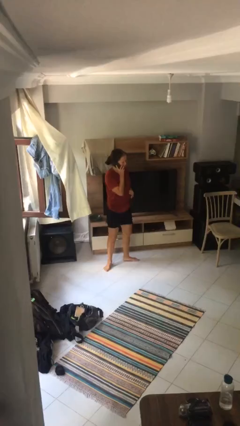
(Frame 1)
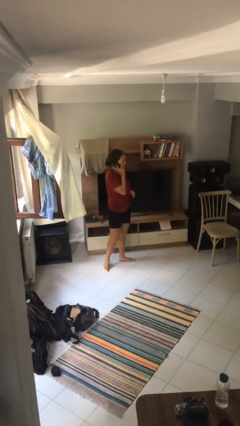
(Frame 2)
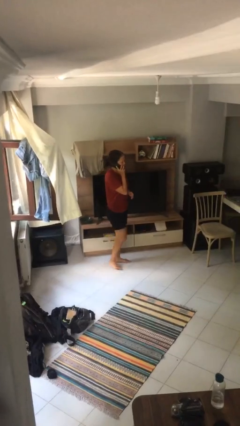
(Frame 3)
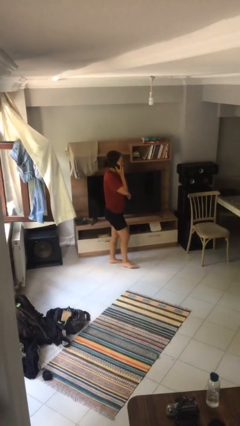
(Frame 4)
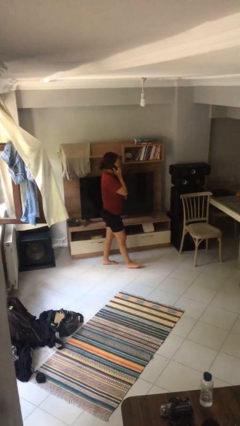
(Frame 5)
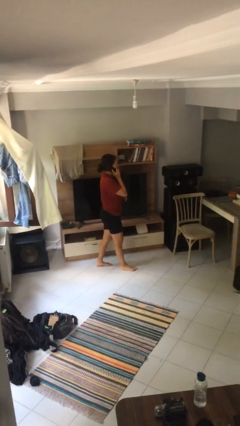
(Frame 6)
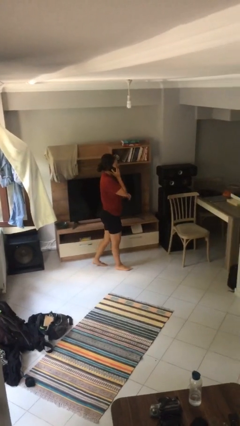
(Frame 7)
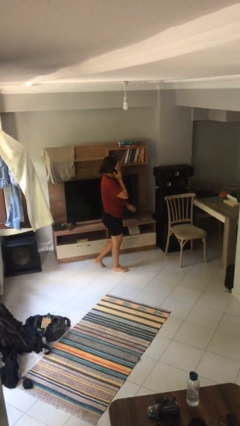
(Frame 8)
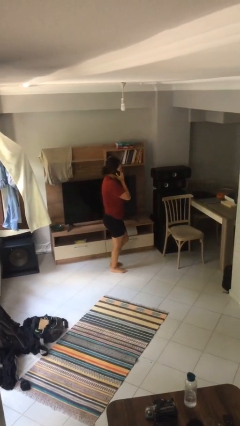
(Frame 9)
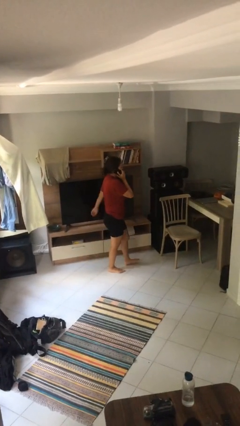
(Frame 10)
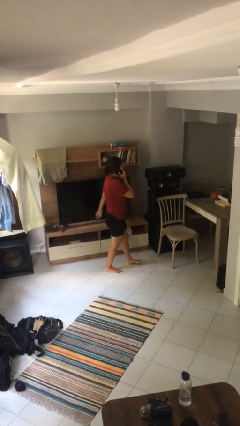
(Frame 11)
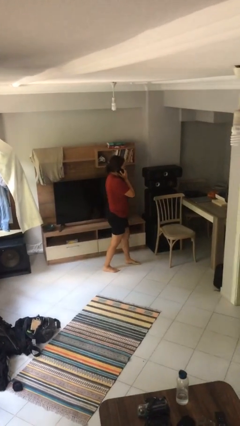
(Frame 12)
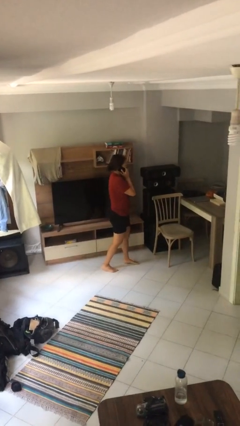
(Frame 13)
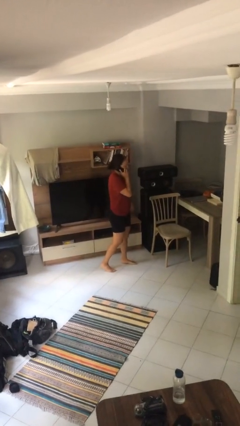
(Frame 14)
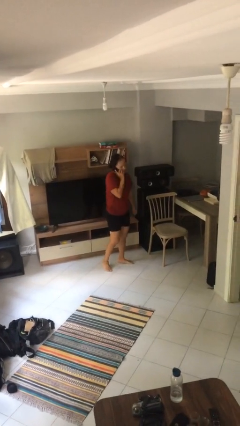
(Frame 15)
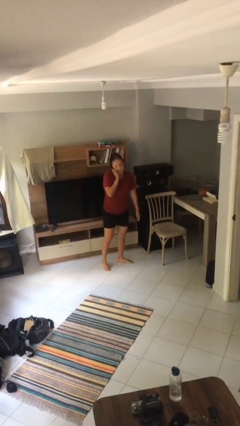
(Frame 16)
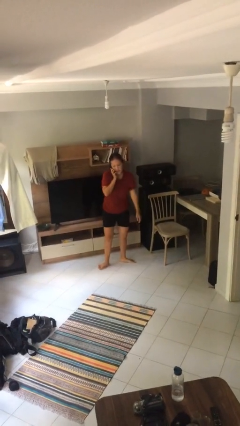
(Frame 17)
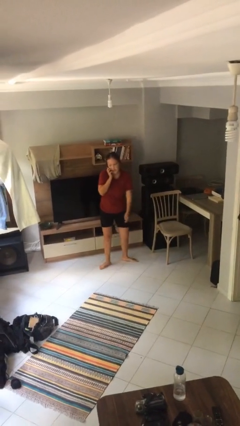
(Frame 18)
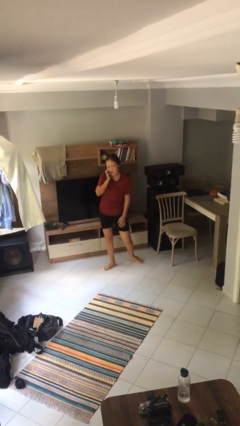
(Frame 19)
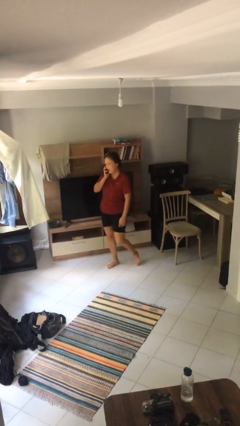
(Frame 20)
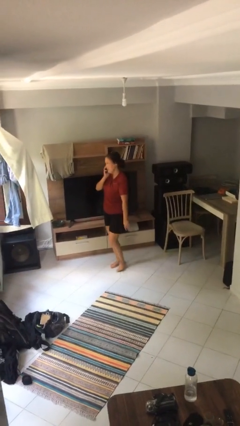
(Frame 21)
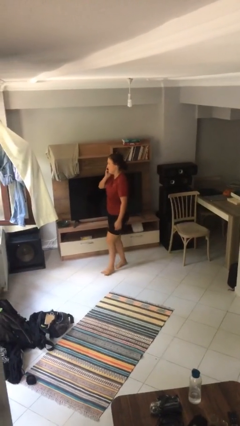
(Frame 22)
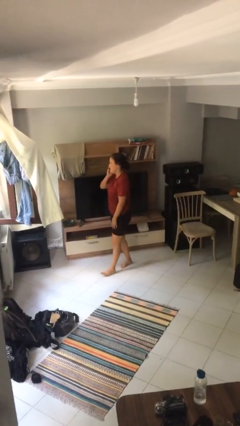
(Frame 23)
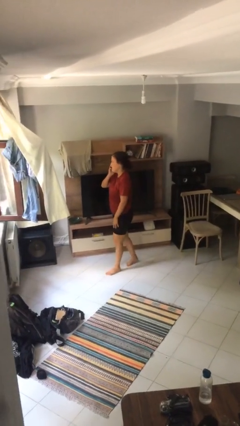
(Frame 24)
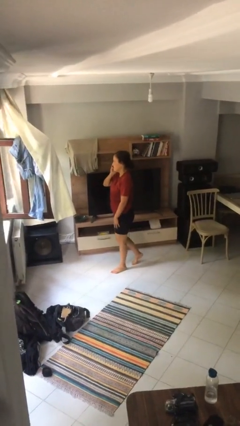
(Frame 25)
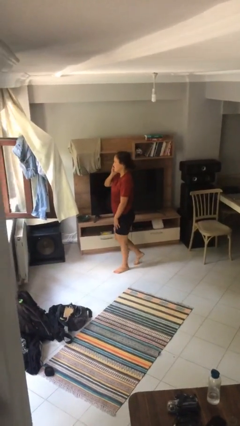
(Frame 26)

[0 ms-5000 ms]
person talks on phone

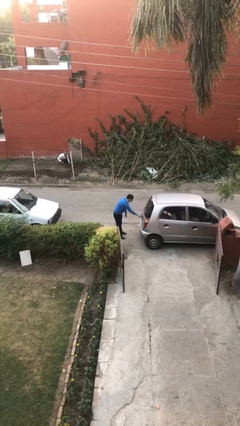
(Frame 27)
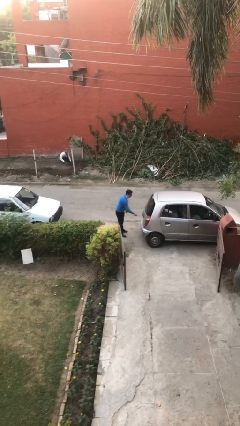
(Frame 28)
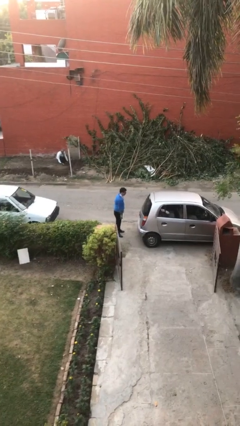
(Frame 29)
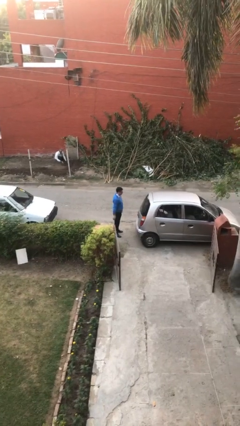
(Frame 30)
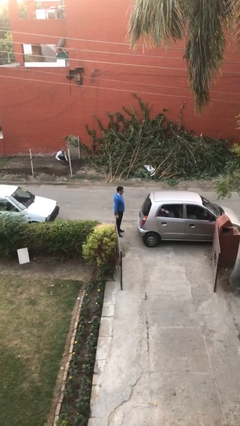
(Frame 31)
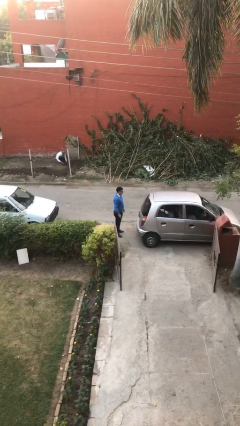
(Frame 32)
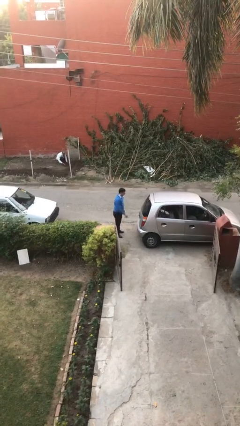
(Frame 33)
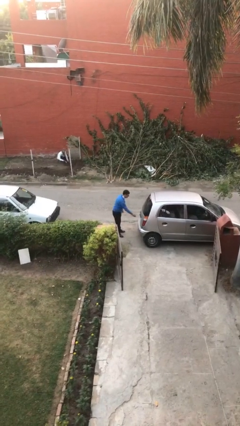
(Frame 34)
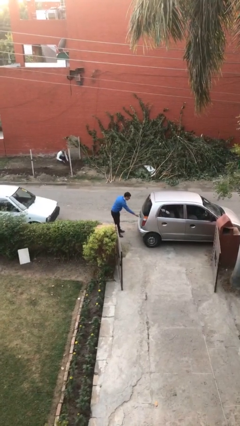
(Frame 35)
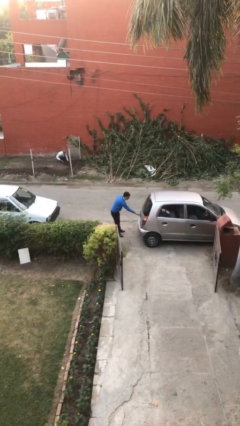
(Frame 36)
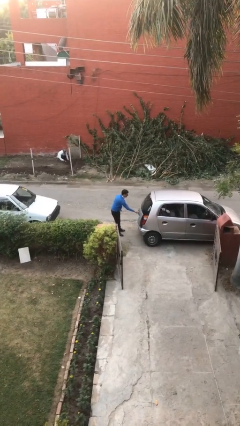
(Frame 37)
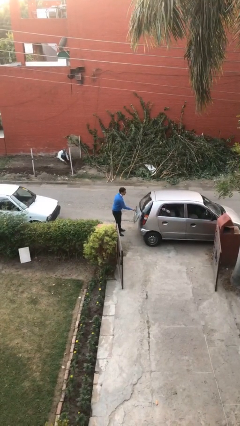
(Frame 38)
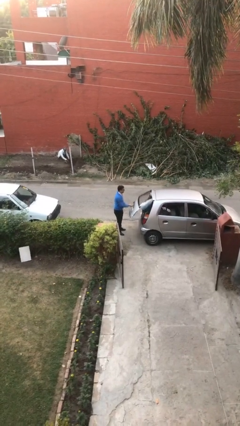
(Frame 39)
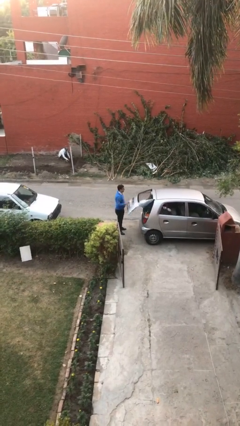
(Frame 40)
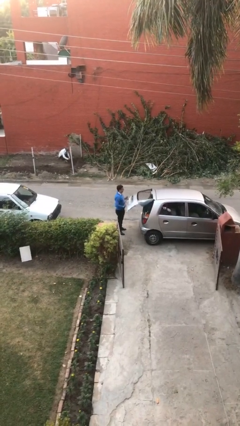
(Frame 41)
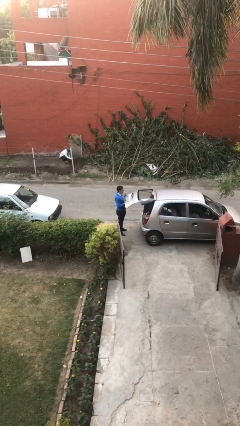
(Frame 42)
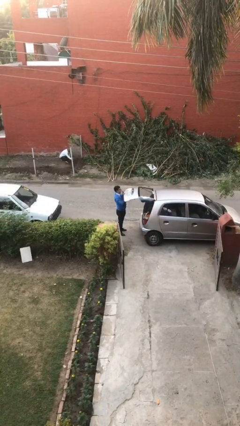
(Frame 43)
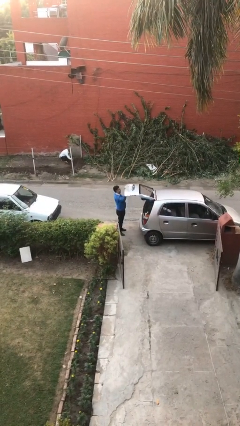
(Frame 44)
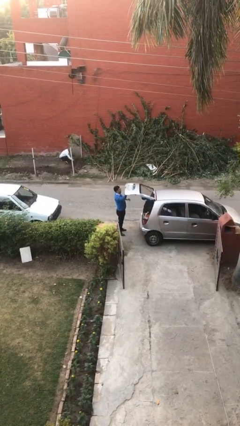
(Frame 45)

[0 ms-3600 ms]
person opens car trunk

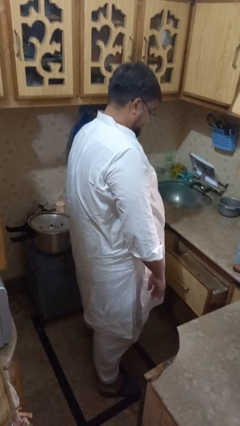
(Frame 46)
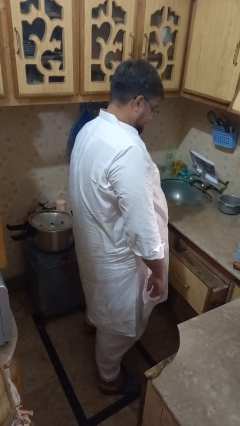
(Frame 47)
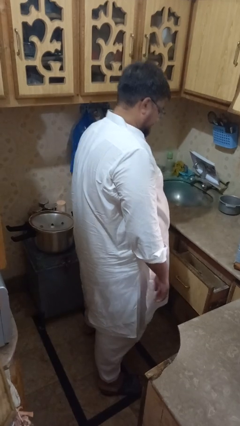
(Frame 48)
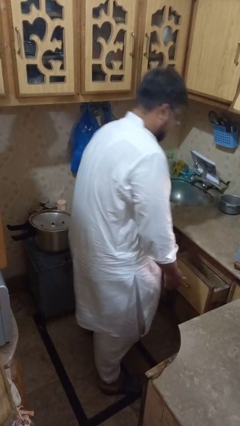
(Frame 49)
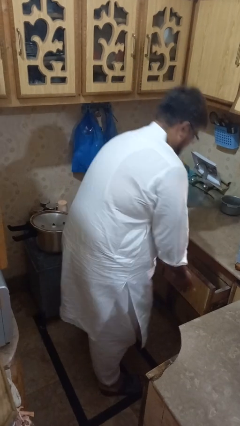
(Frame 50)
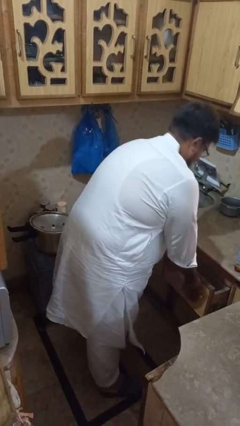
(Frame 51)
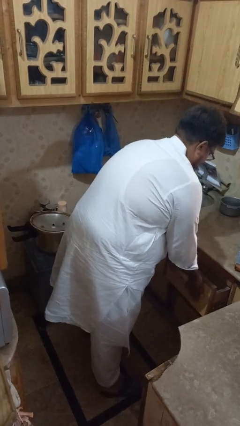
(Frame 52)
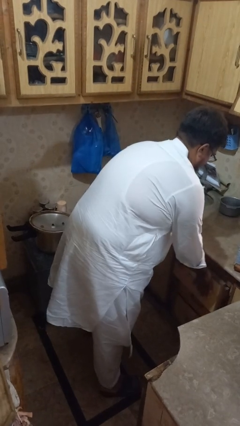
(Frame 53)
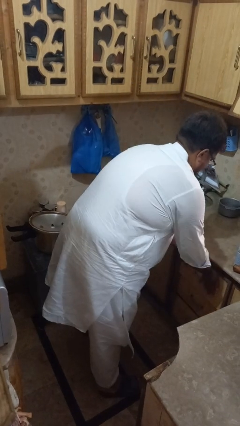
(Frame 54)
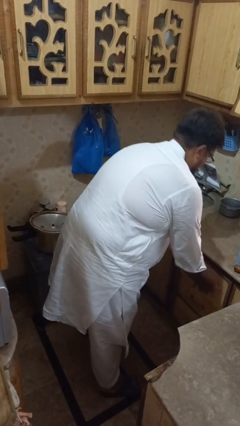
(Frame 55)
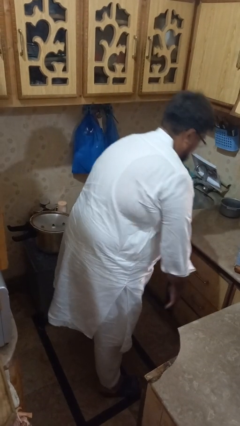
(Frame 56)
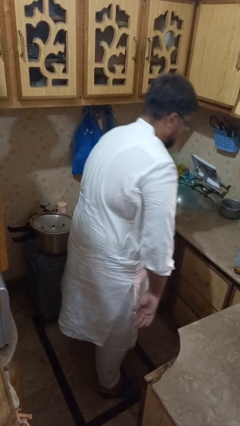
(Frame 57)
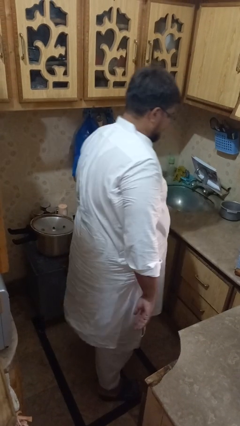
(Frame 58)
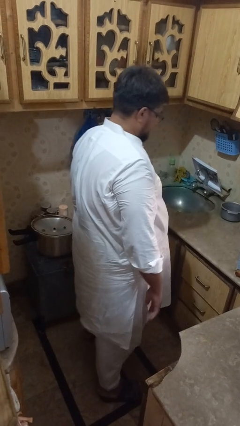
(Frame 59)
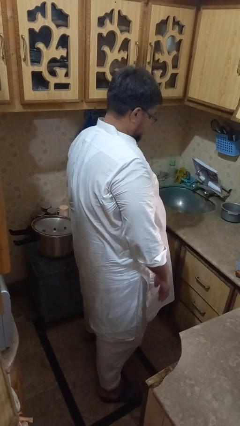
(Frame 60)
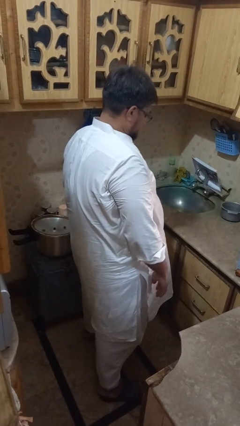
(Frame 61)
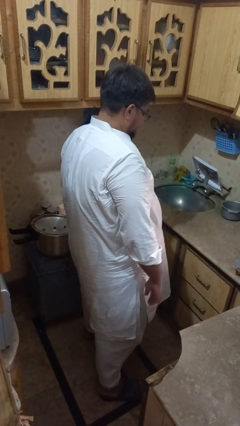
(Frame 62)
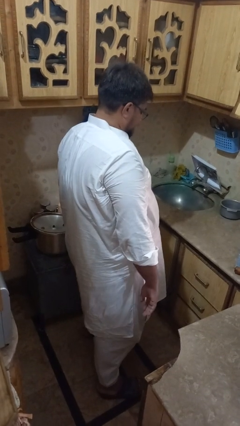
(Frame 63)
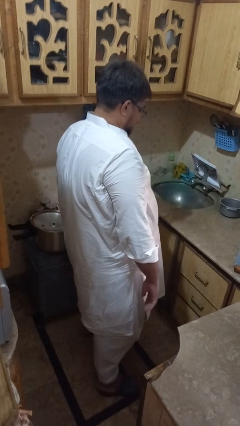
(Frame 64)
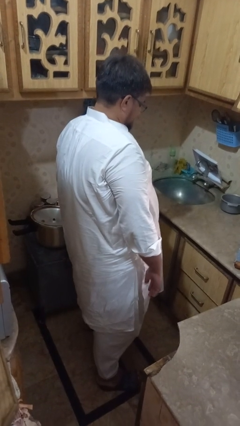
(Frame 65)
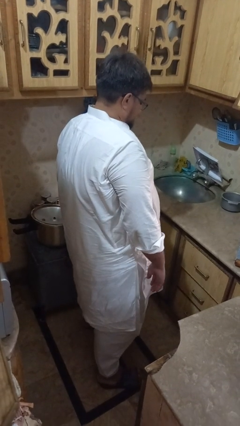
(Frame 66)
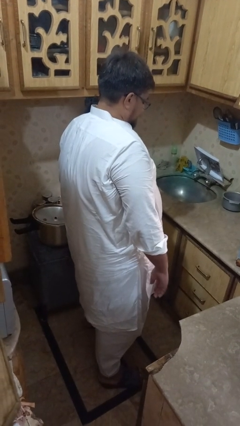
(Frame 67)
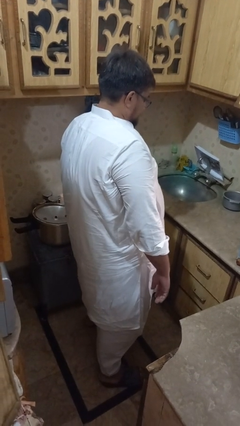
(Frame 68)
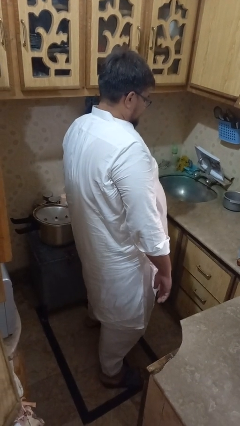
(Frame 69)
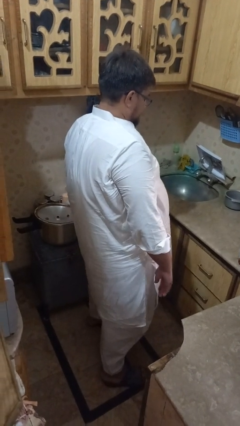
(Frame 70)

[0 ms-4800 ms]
person closes kitchen drawer

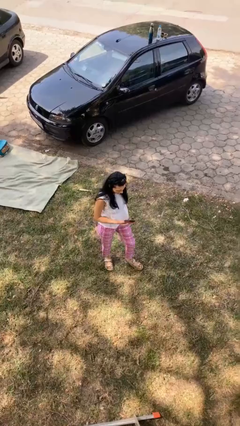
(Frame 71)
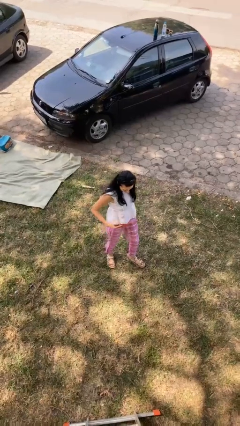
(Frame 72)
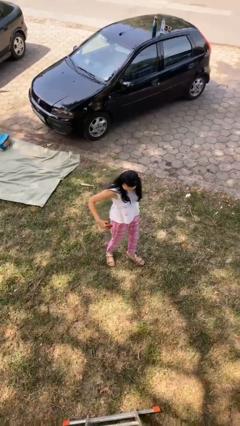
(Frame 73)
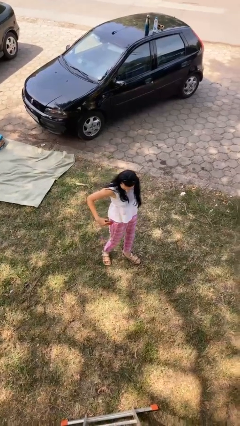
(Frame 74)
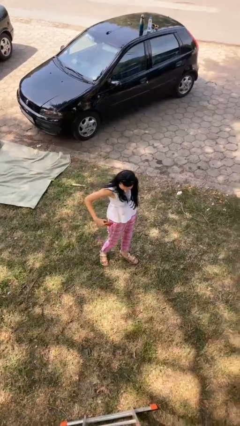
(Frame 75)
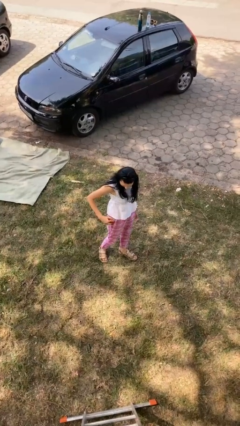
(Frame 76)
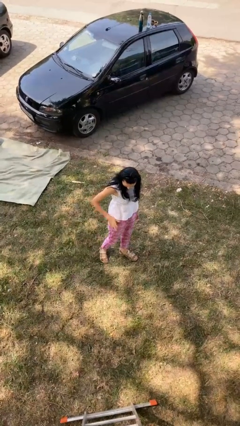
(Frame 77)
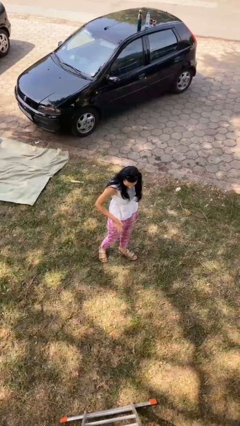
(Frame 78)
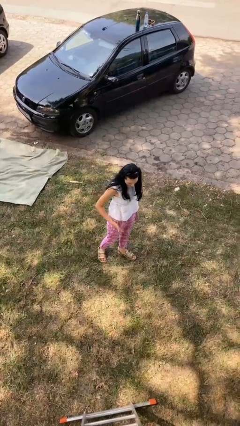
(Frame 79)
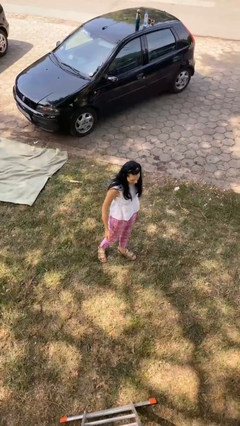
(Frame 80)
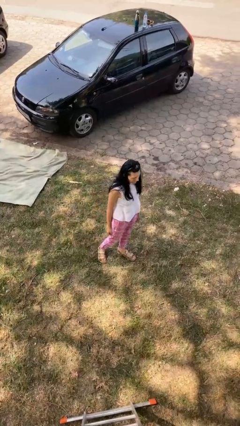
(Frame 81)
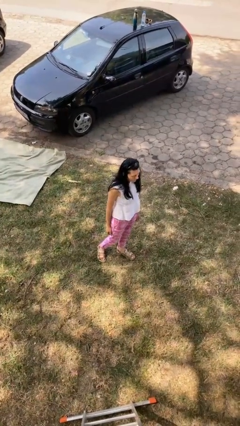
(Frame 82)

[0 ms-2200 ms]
person puts phone into pocket

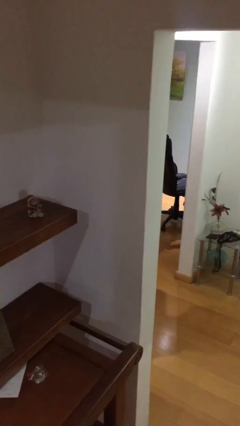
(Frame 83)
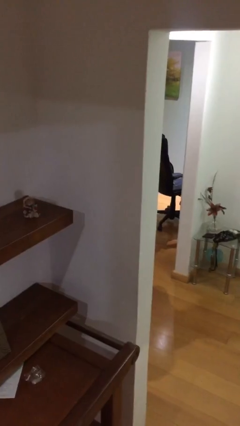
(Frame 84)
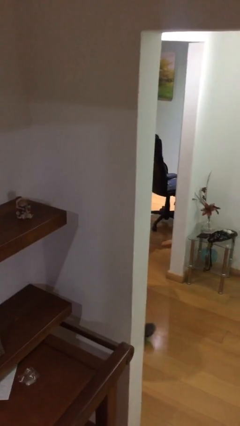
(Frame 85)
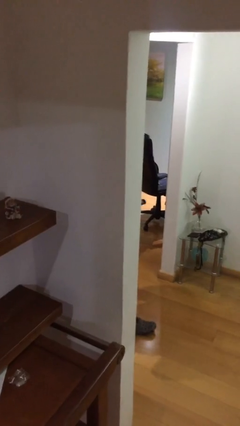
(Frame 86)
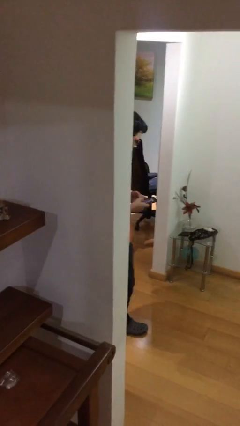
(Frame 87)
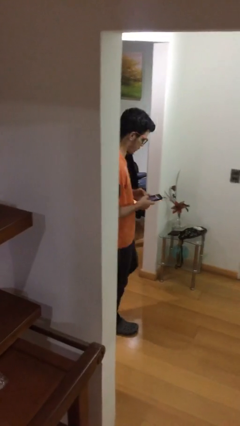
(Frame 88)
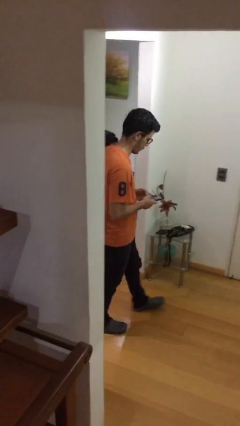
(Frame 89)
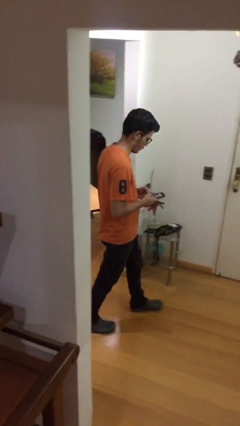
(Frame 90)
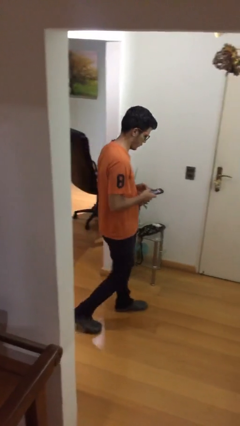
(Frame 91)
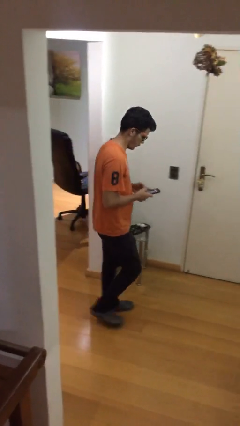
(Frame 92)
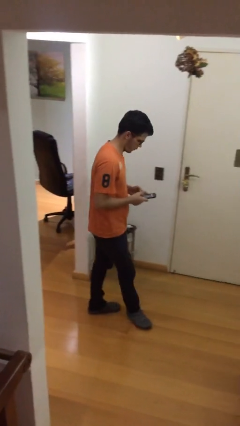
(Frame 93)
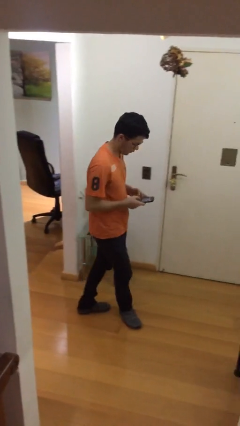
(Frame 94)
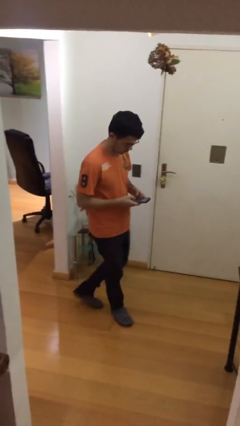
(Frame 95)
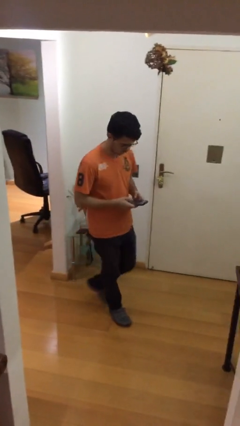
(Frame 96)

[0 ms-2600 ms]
person enters scene through structure
